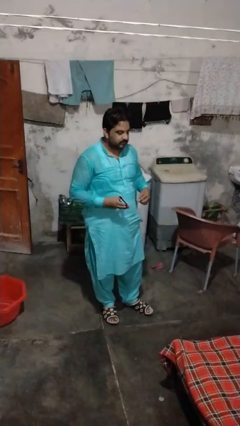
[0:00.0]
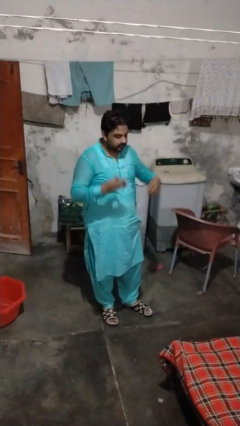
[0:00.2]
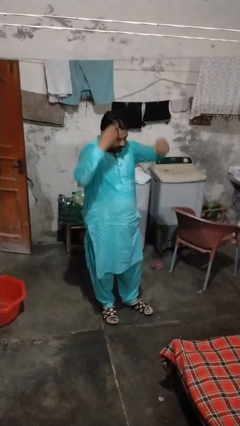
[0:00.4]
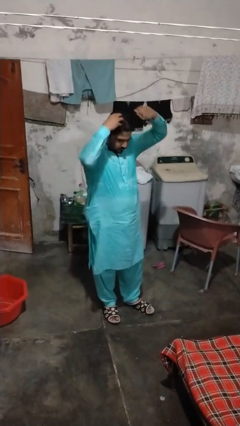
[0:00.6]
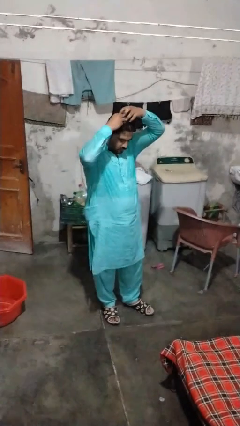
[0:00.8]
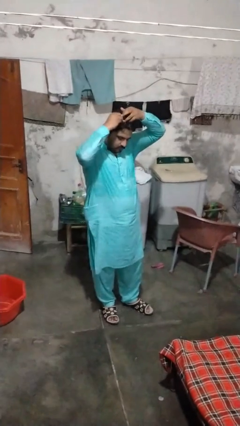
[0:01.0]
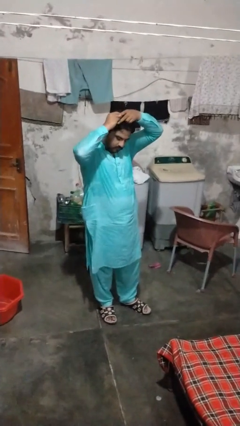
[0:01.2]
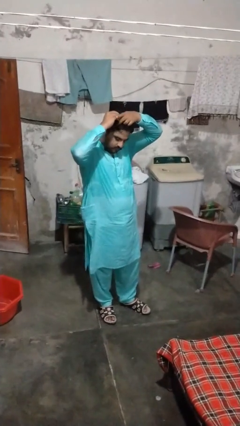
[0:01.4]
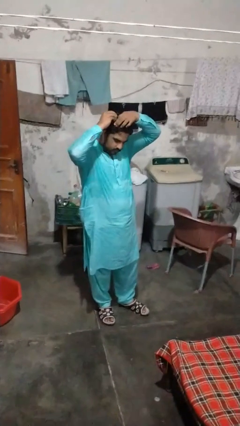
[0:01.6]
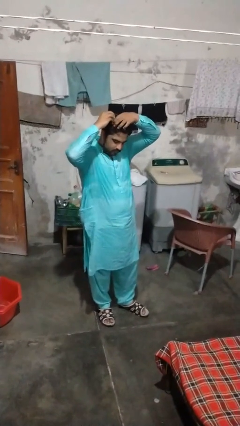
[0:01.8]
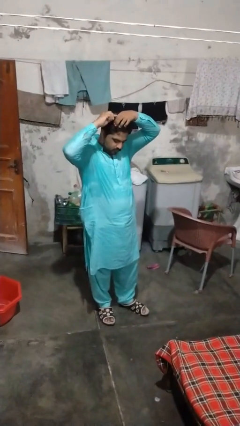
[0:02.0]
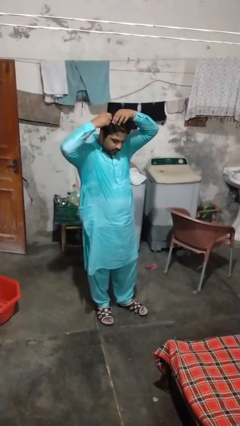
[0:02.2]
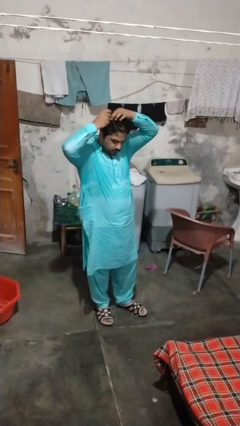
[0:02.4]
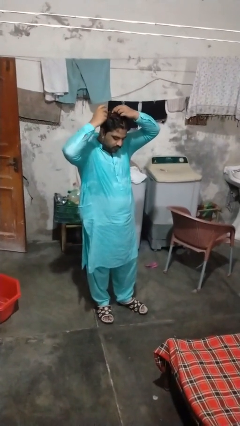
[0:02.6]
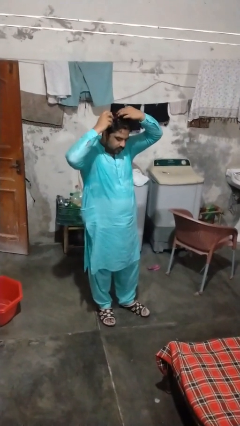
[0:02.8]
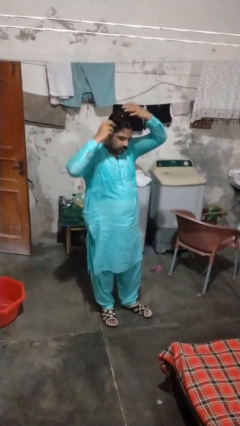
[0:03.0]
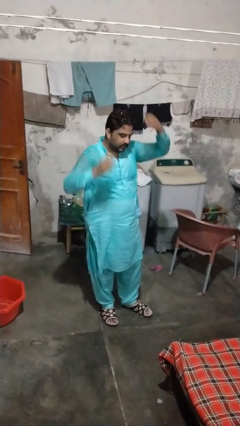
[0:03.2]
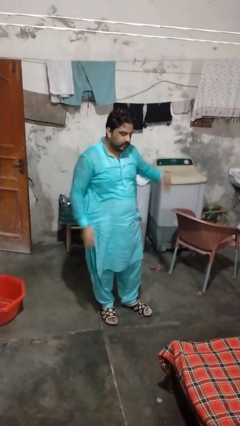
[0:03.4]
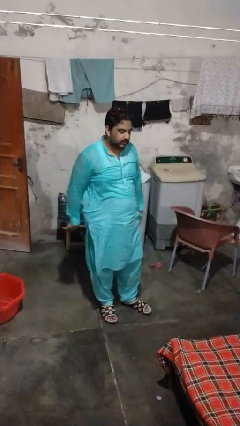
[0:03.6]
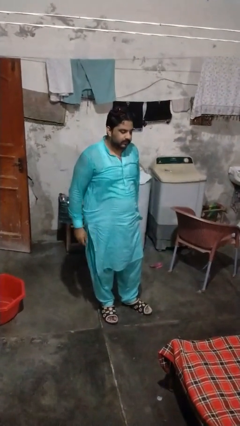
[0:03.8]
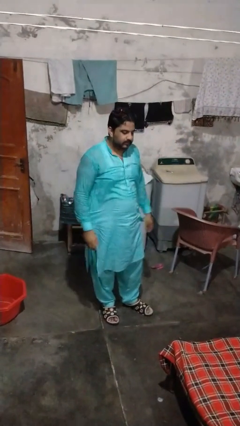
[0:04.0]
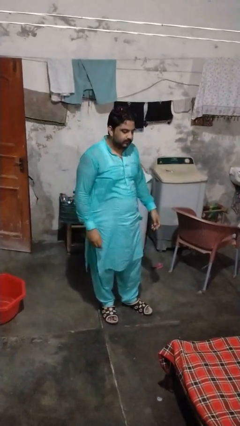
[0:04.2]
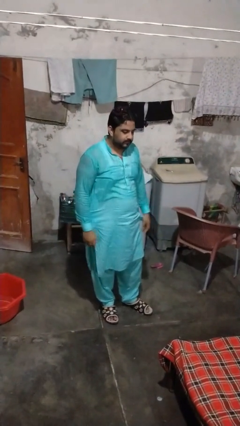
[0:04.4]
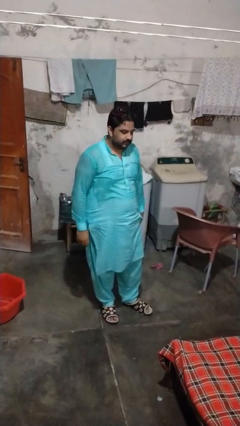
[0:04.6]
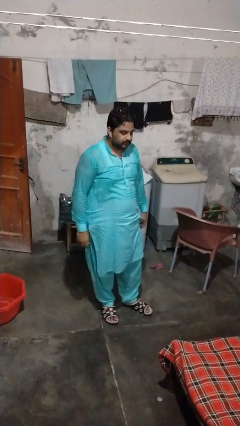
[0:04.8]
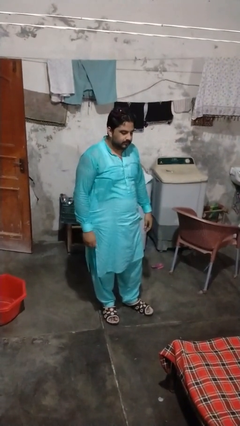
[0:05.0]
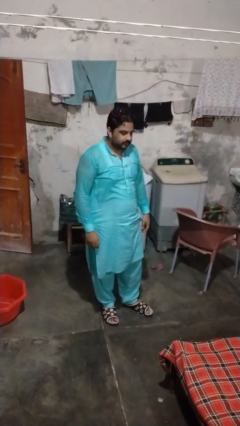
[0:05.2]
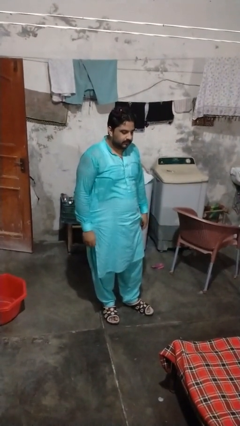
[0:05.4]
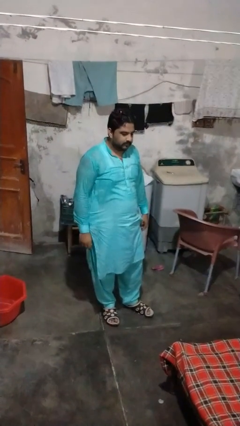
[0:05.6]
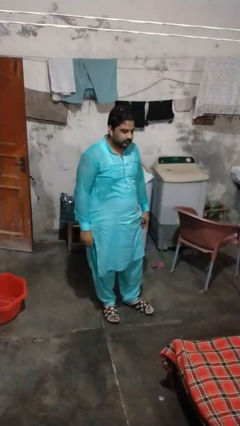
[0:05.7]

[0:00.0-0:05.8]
person puts hair in ponytail

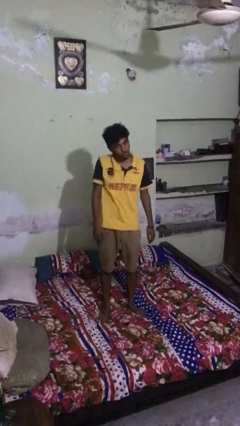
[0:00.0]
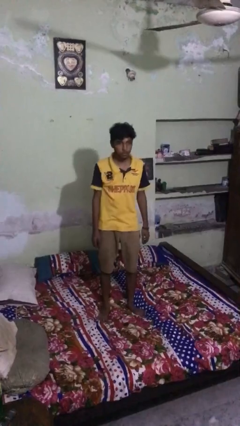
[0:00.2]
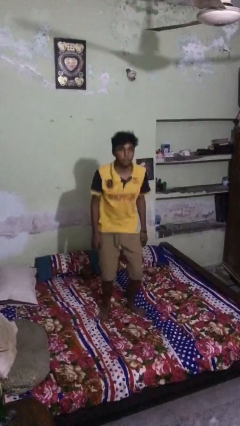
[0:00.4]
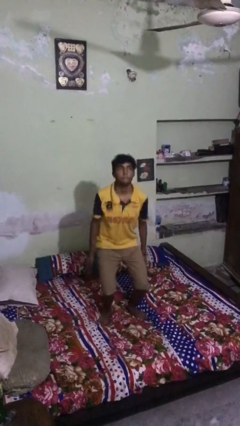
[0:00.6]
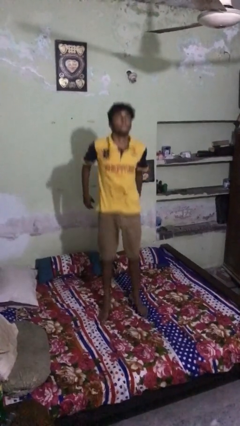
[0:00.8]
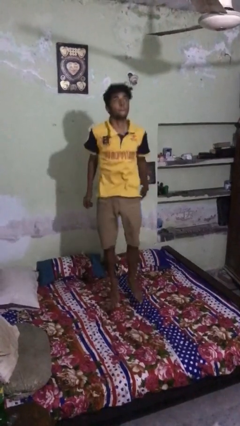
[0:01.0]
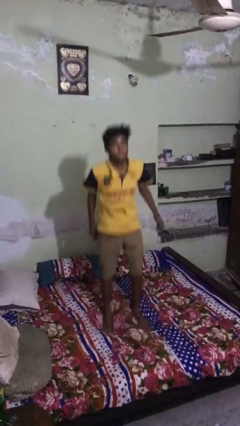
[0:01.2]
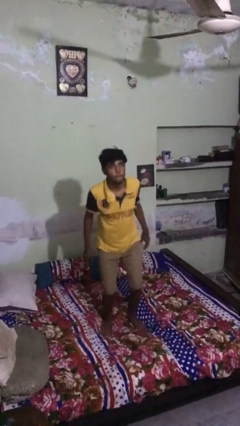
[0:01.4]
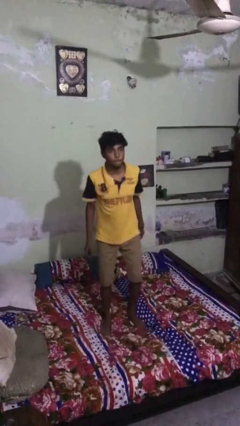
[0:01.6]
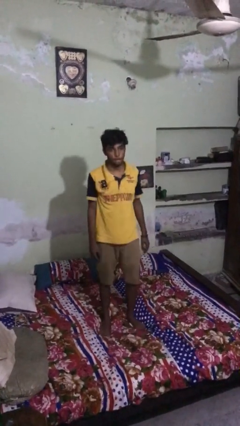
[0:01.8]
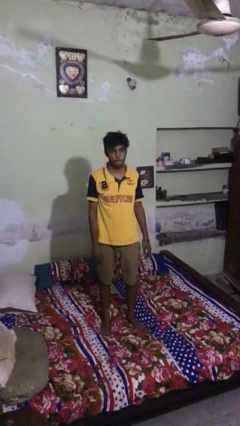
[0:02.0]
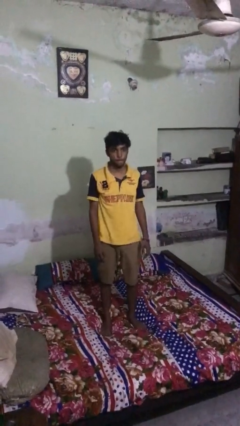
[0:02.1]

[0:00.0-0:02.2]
person jumps on bed

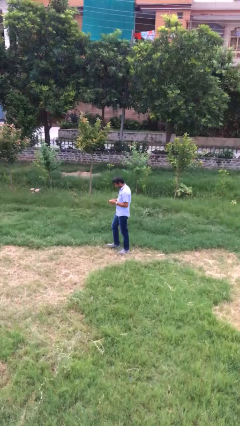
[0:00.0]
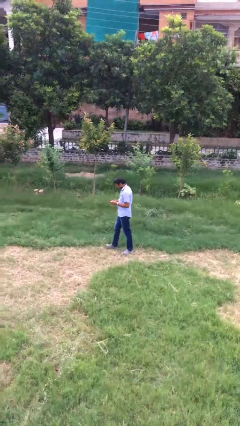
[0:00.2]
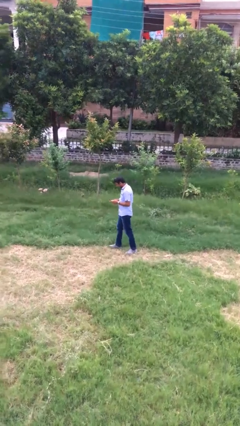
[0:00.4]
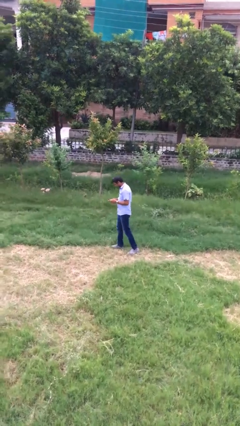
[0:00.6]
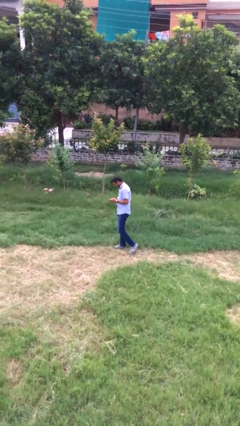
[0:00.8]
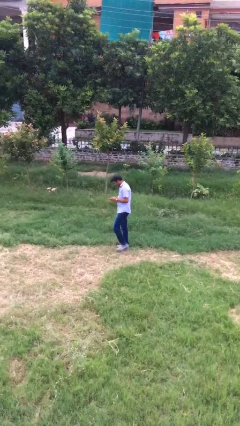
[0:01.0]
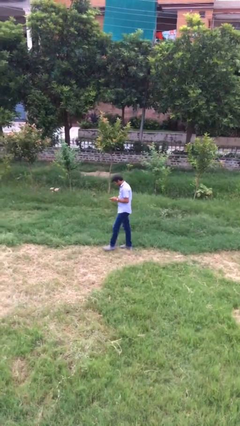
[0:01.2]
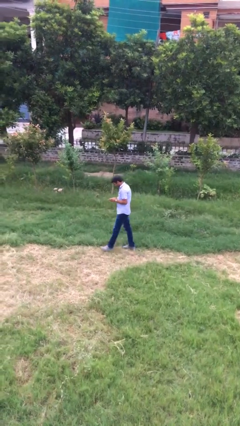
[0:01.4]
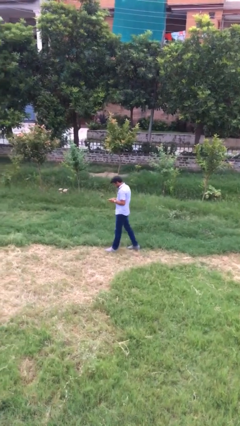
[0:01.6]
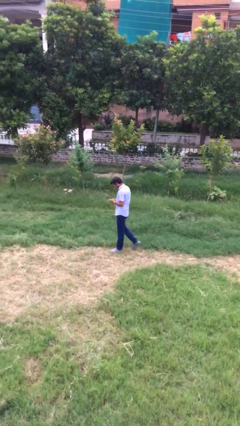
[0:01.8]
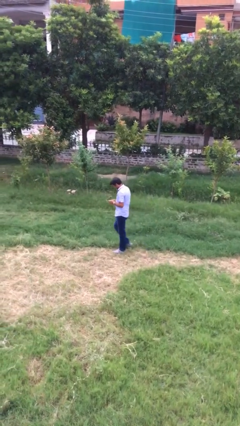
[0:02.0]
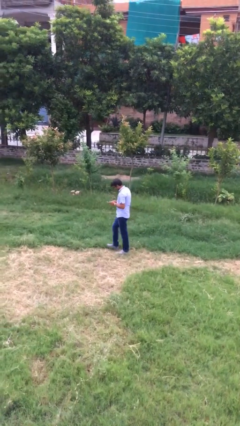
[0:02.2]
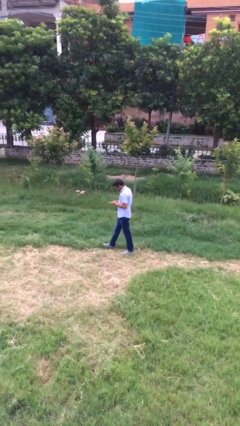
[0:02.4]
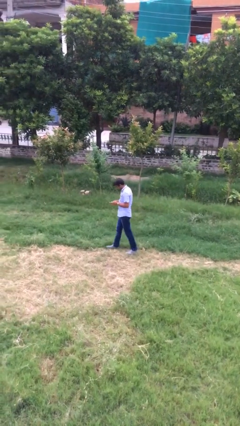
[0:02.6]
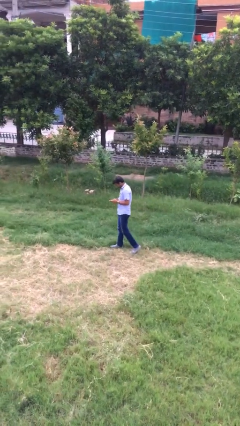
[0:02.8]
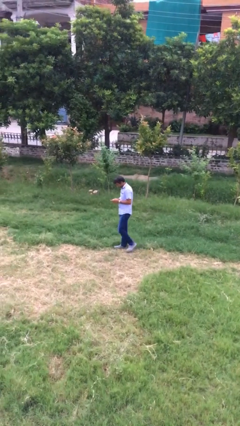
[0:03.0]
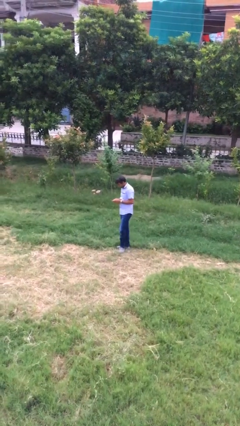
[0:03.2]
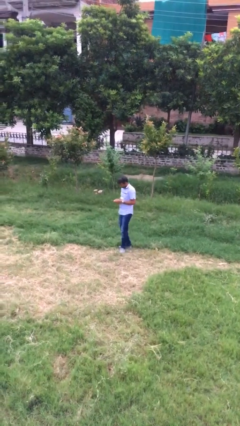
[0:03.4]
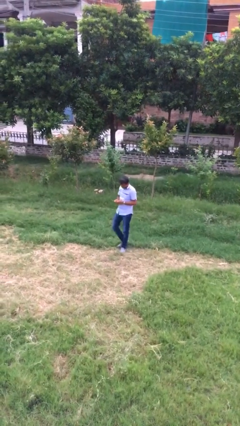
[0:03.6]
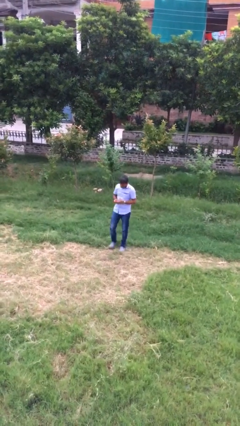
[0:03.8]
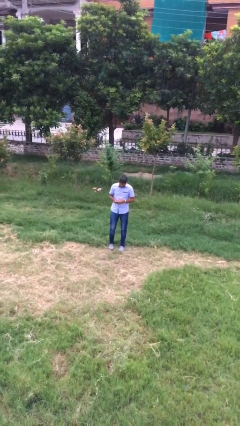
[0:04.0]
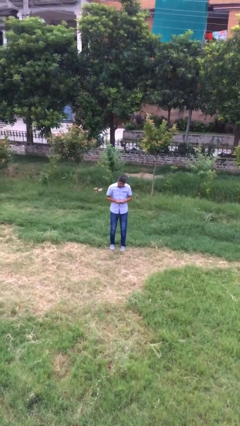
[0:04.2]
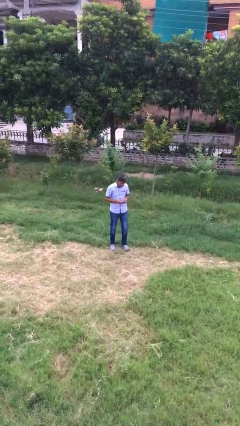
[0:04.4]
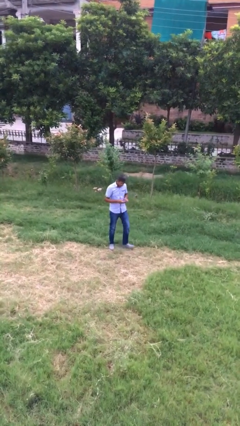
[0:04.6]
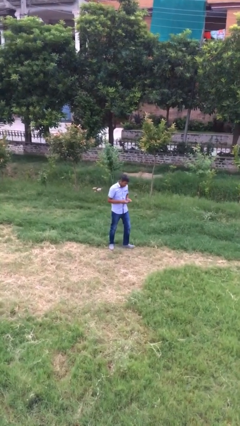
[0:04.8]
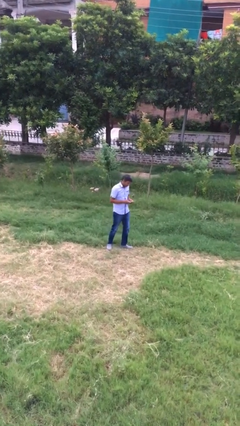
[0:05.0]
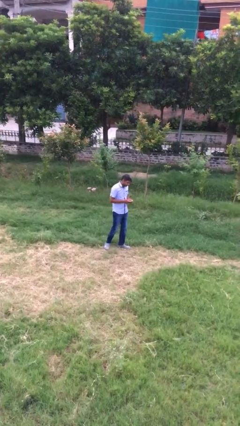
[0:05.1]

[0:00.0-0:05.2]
person texts on phone

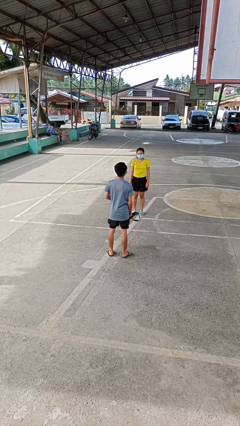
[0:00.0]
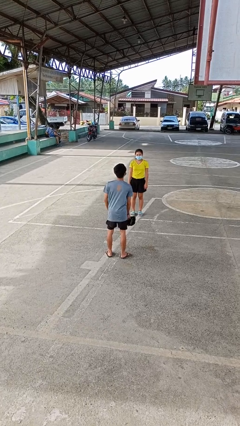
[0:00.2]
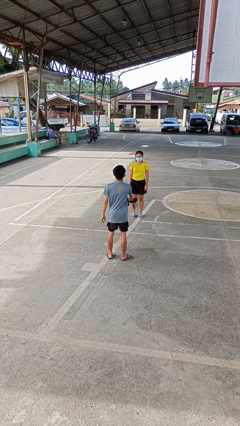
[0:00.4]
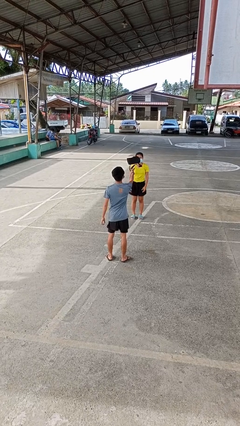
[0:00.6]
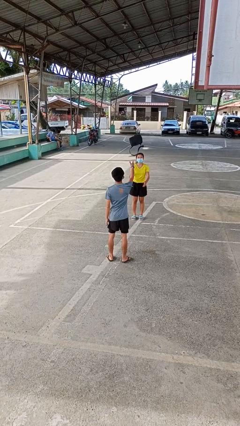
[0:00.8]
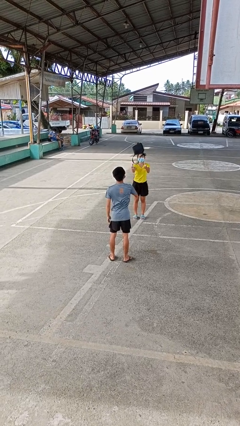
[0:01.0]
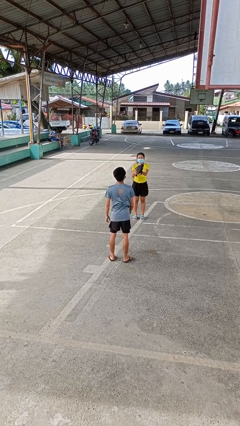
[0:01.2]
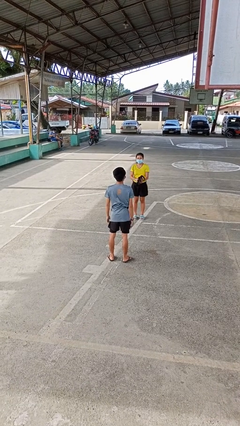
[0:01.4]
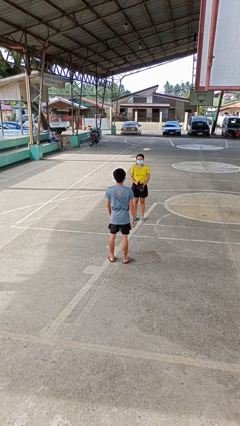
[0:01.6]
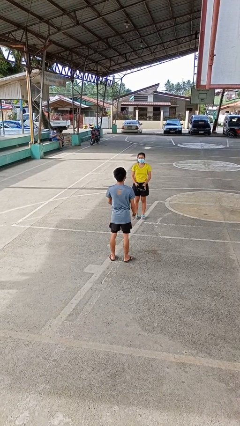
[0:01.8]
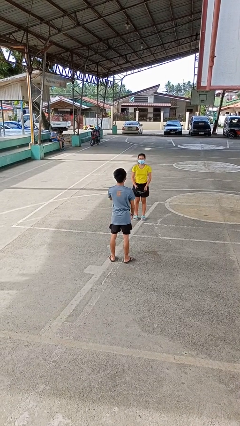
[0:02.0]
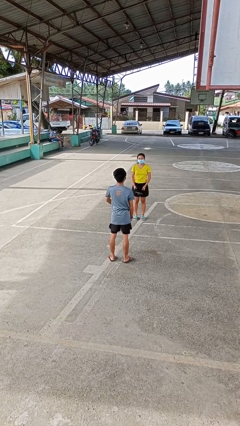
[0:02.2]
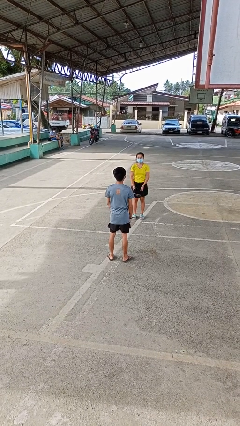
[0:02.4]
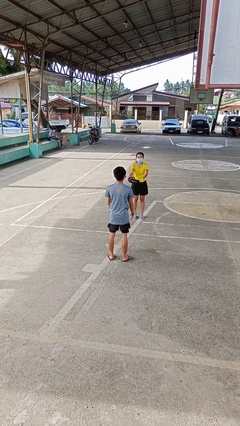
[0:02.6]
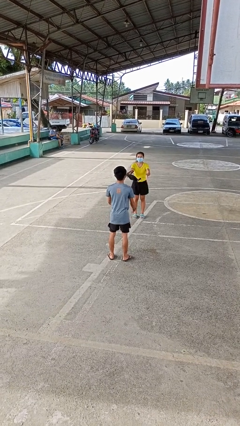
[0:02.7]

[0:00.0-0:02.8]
person throws object to person

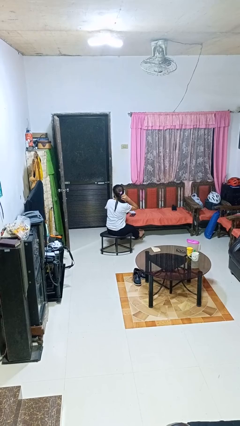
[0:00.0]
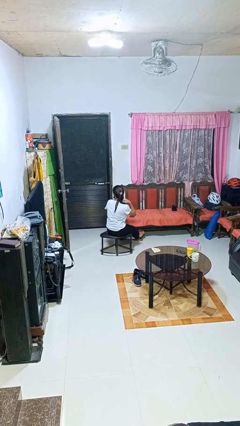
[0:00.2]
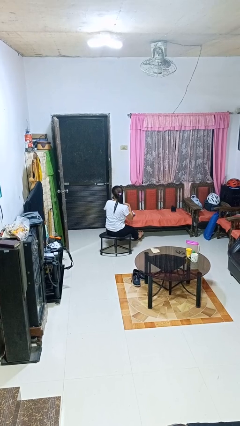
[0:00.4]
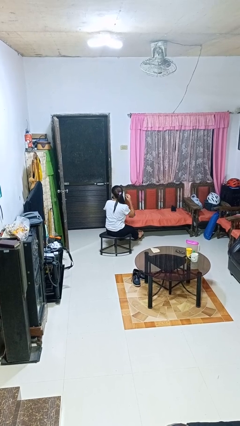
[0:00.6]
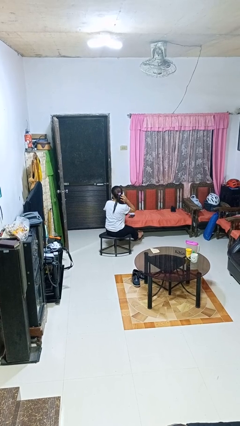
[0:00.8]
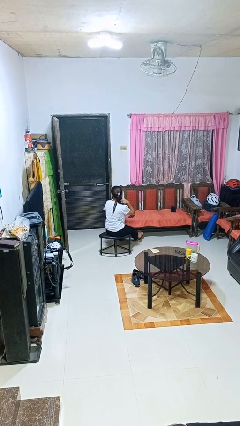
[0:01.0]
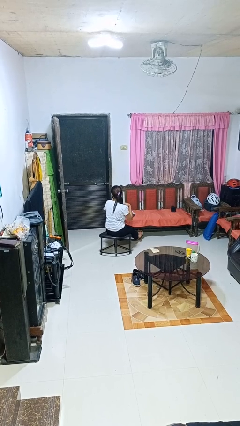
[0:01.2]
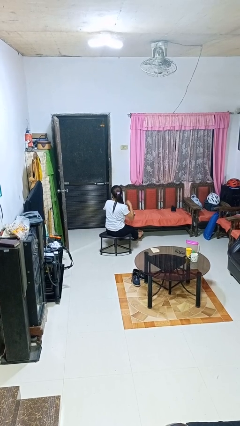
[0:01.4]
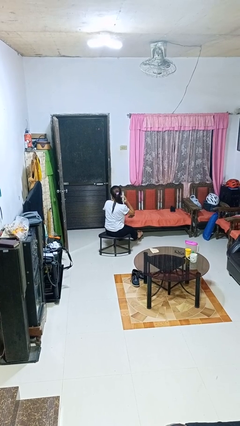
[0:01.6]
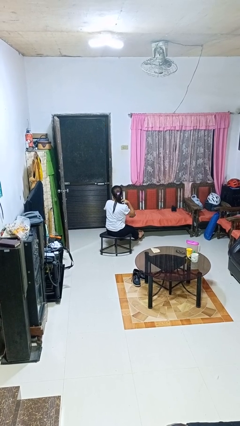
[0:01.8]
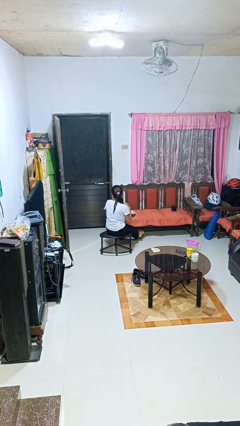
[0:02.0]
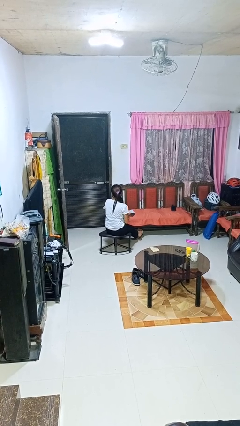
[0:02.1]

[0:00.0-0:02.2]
person strokes hair
